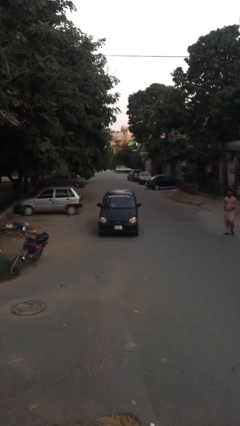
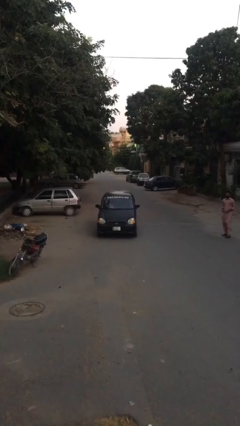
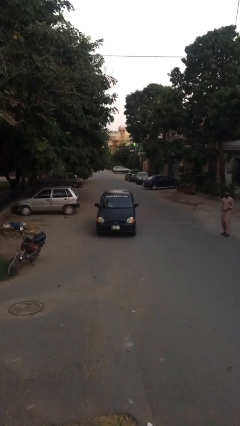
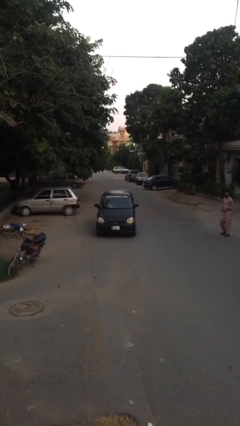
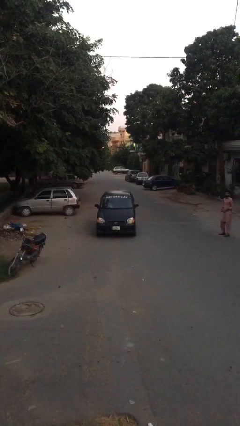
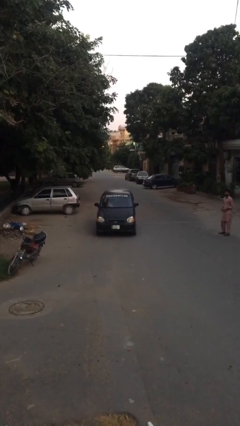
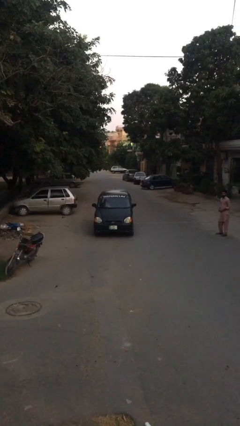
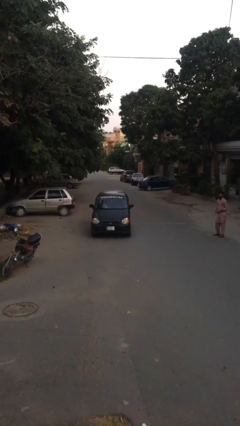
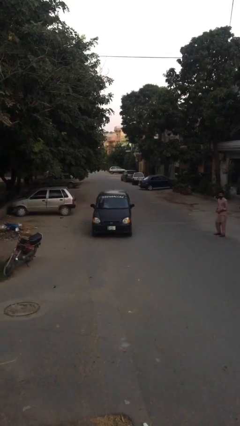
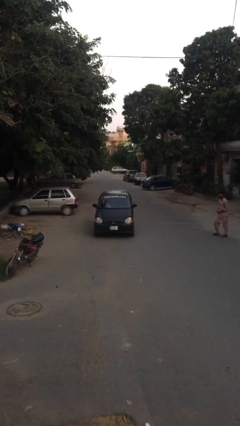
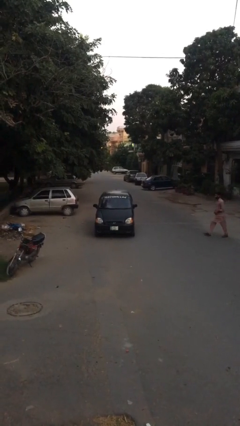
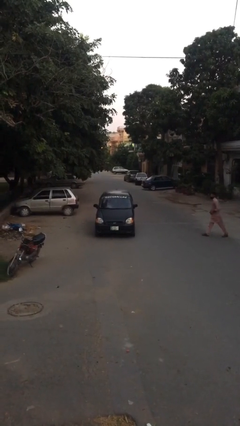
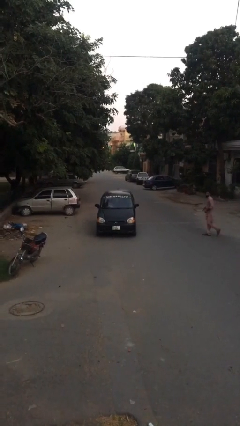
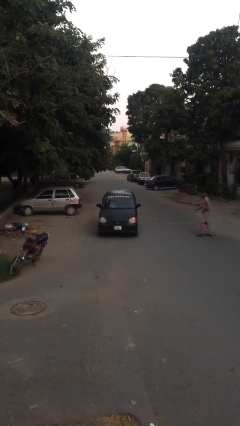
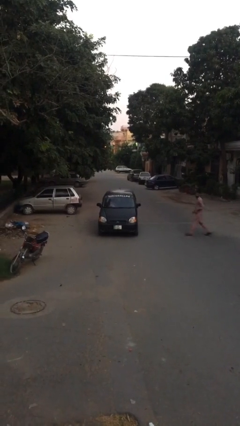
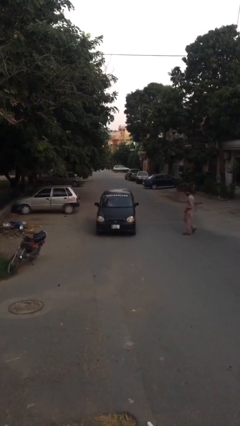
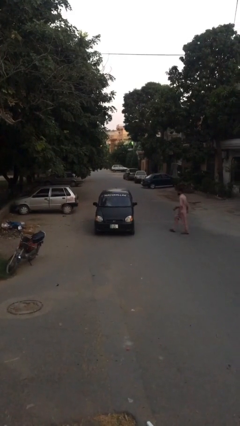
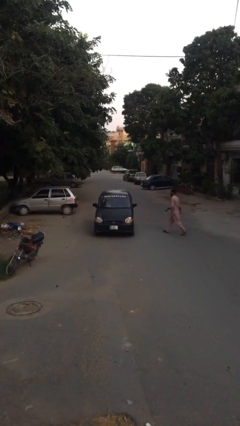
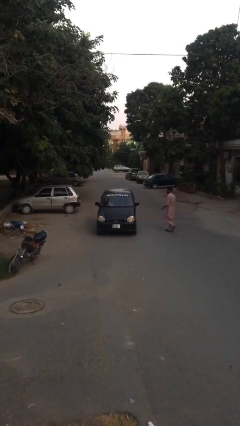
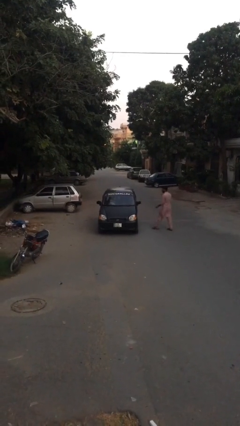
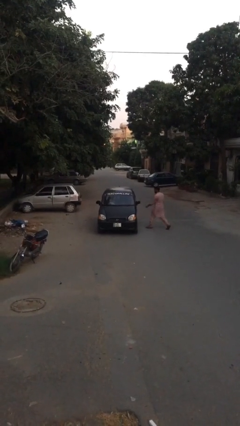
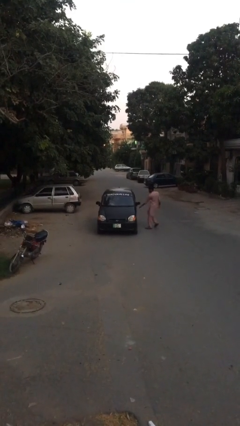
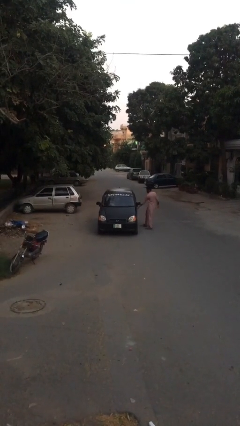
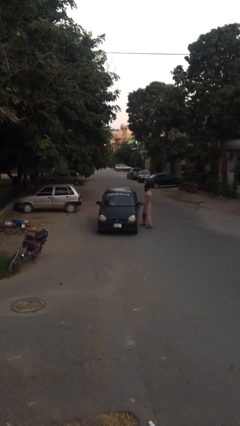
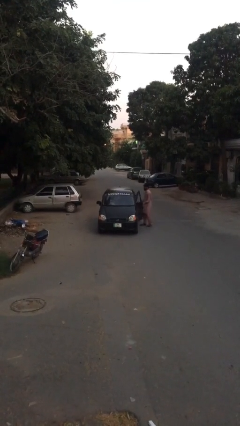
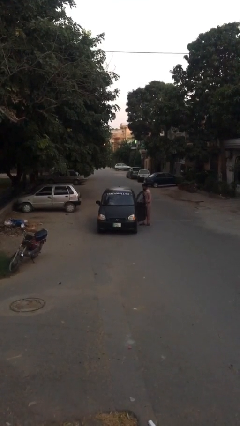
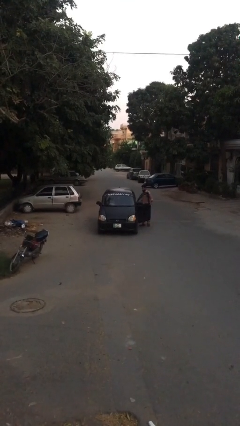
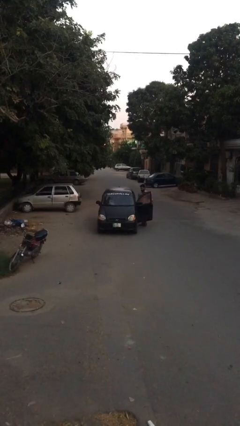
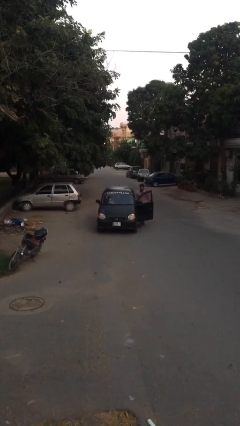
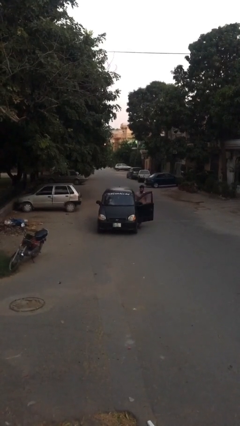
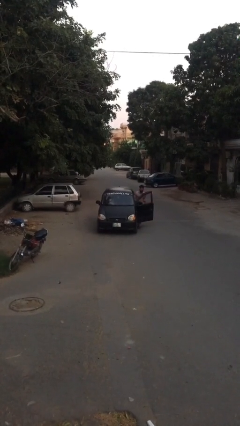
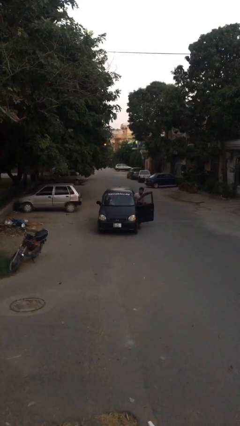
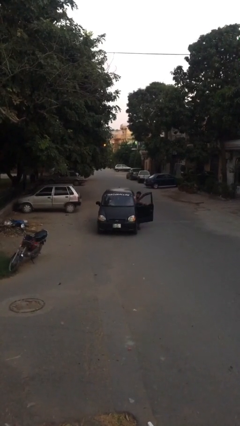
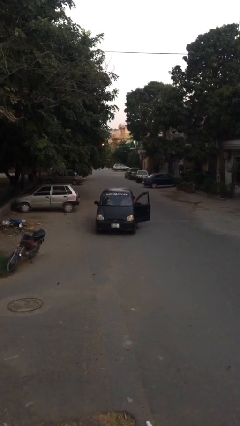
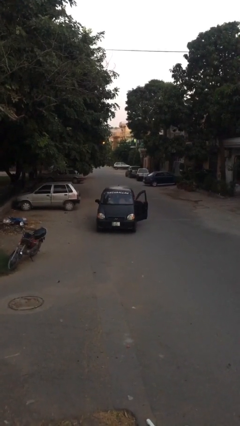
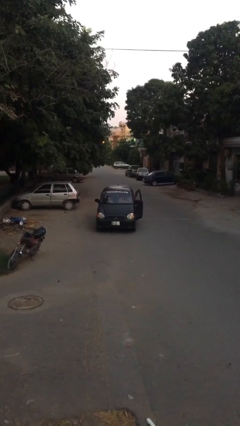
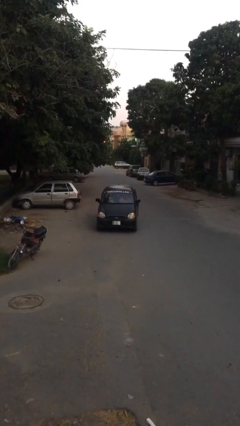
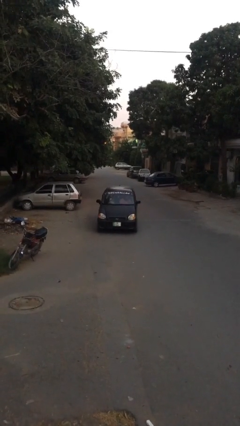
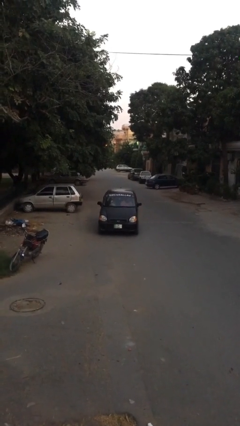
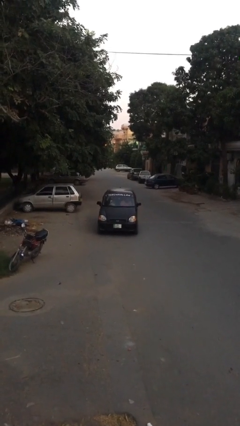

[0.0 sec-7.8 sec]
car picks up person

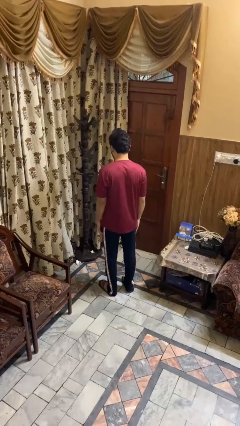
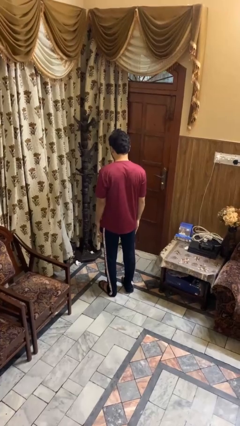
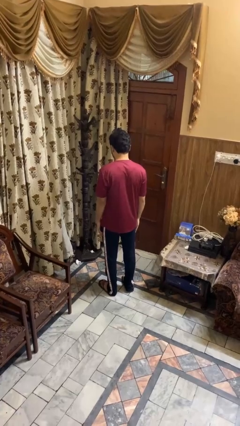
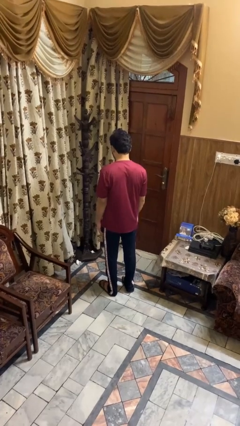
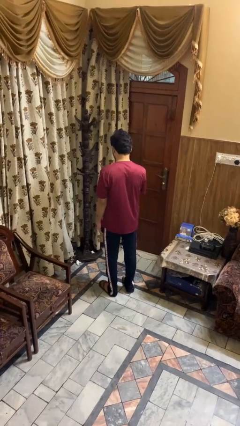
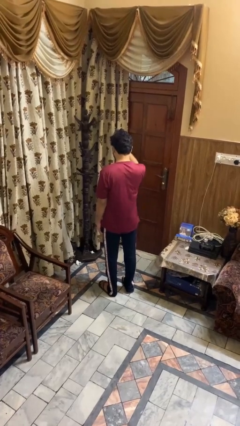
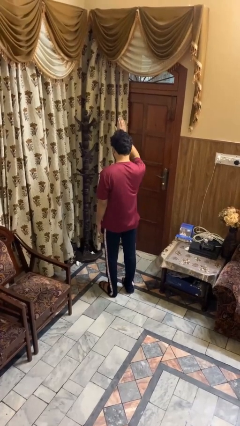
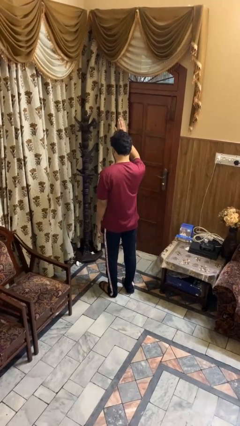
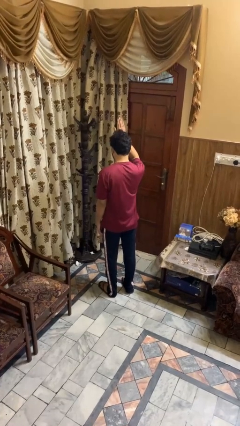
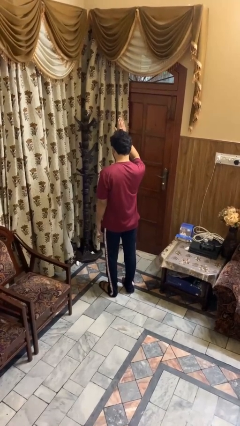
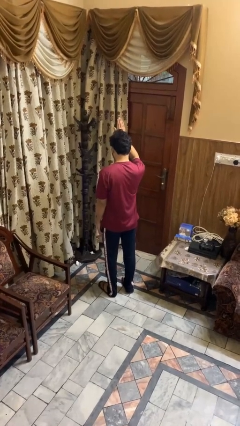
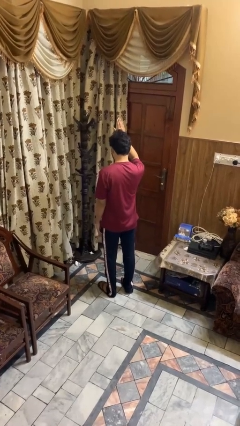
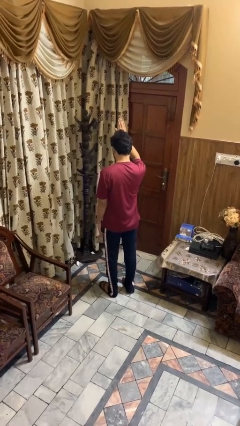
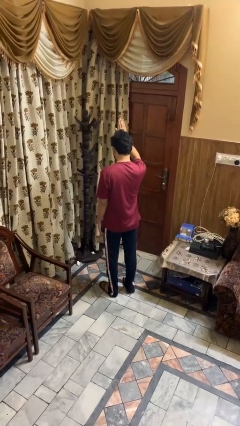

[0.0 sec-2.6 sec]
person gestures raise hand

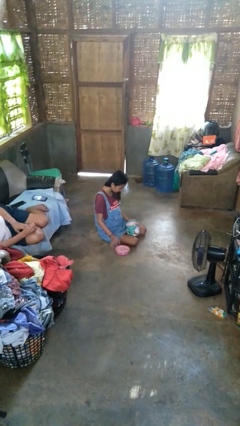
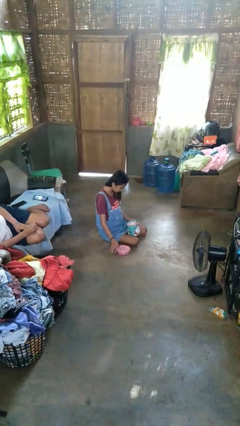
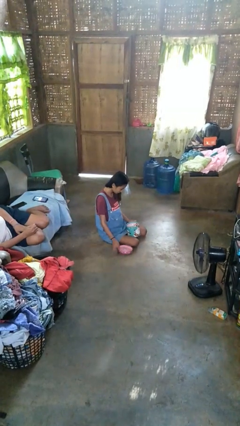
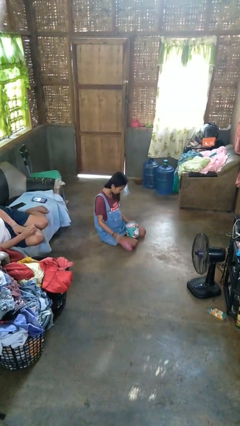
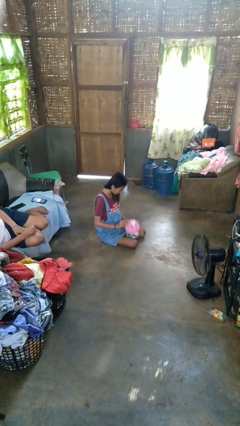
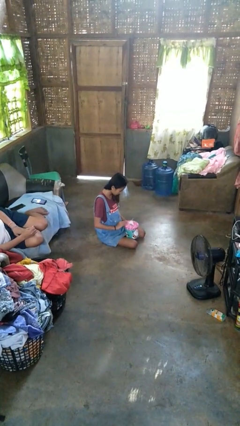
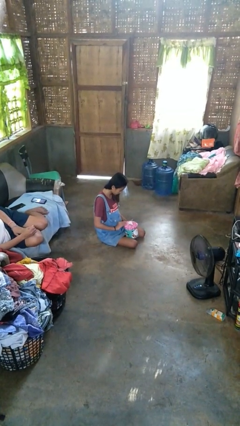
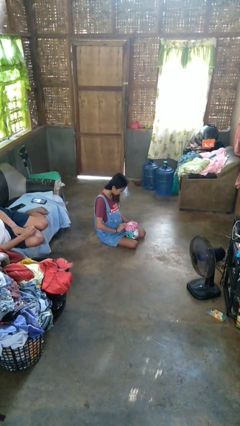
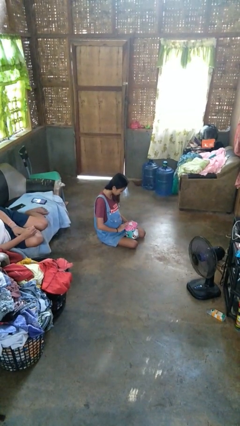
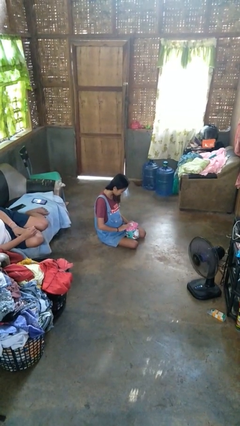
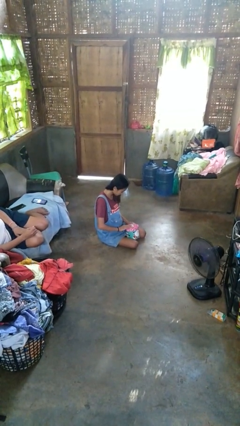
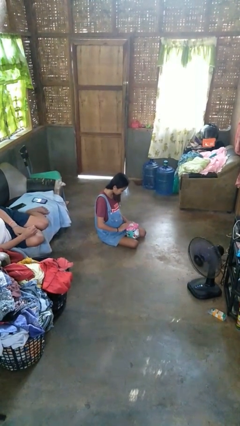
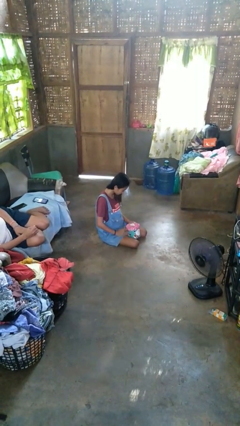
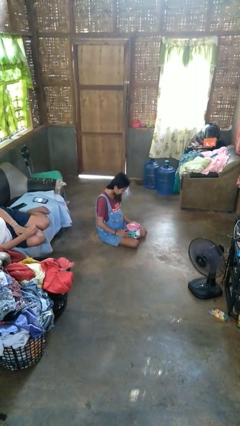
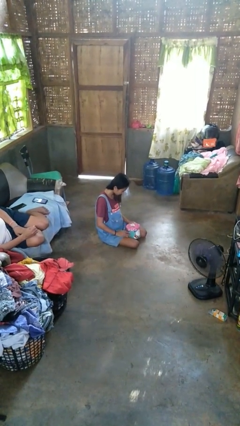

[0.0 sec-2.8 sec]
person closes jewelry box

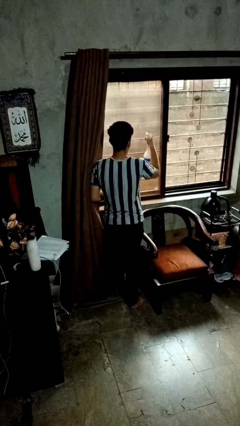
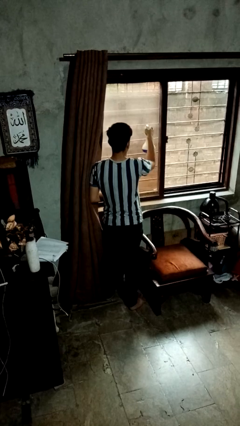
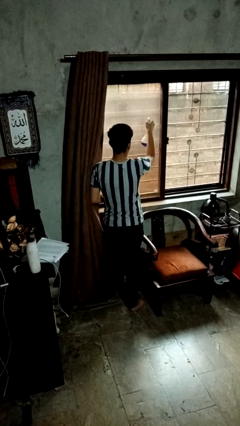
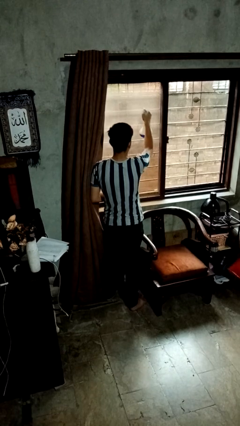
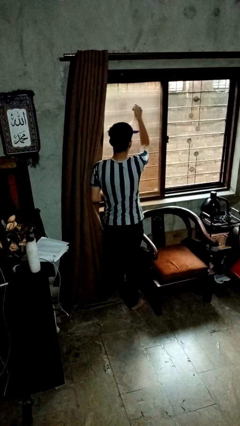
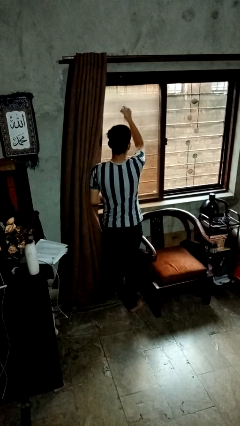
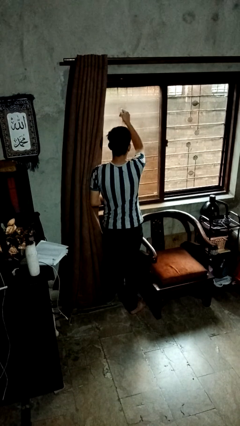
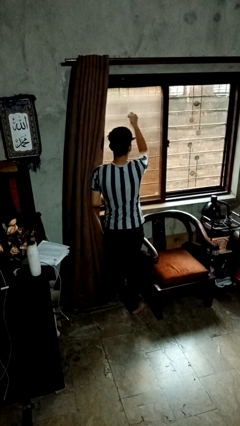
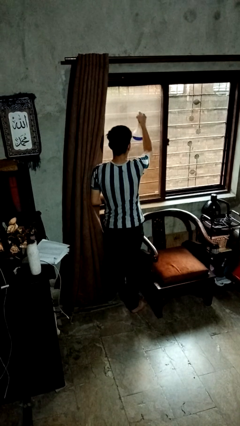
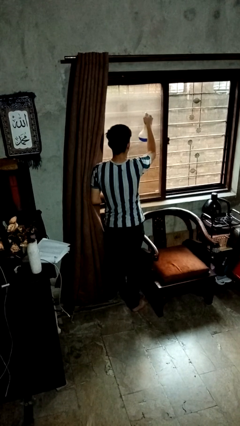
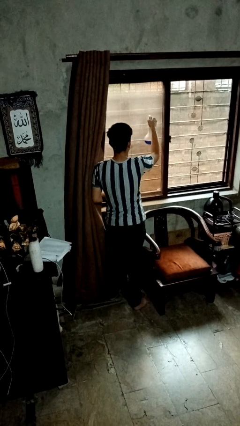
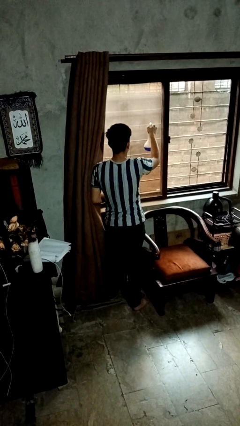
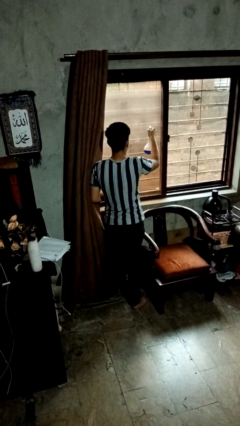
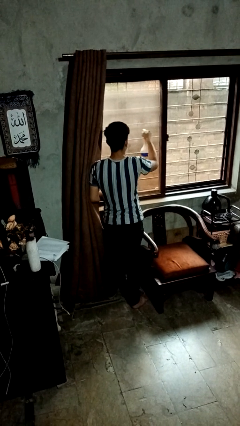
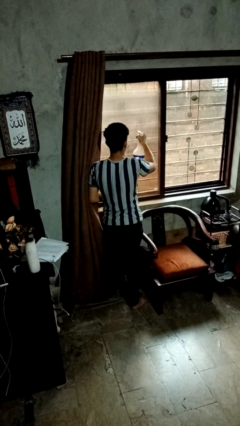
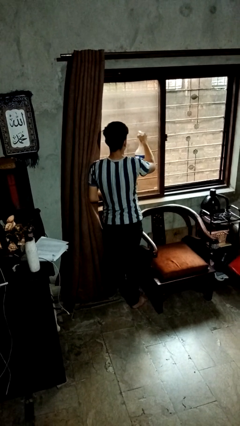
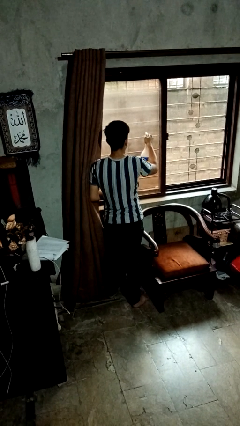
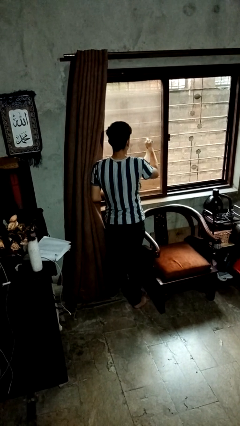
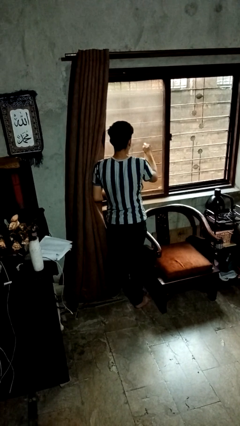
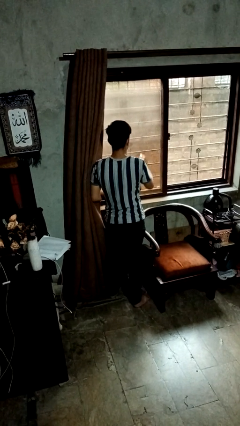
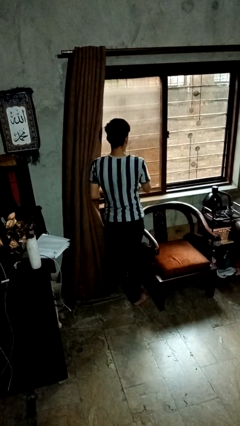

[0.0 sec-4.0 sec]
person sprays from bottle

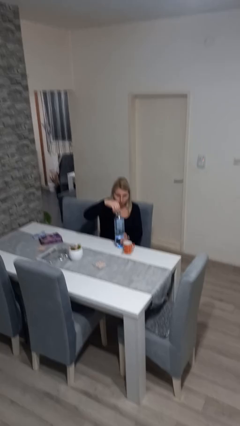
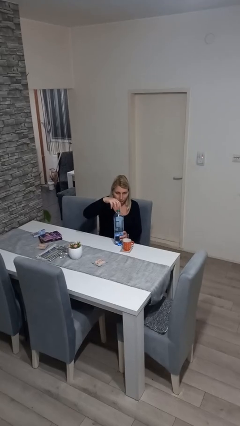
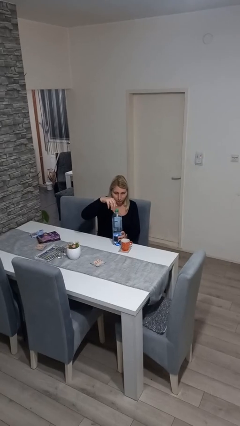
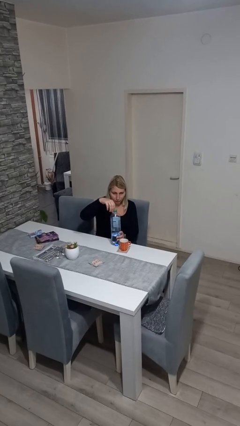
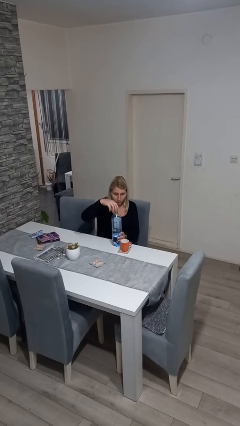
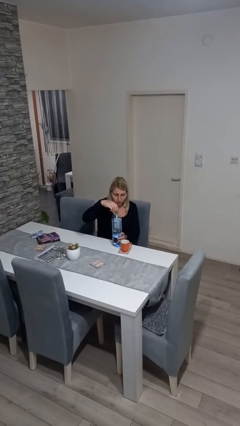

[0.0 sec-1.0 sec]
person screws lid to bottle
